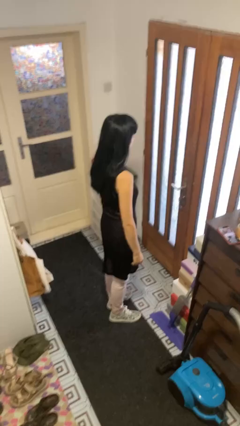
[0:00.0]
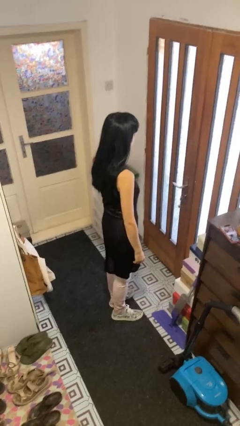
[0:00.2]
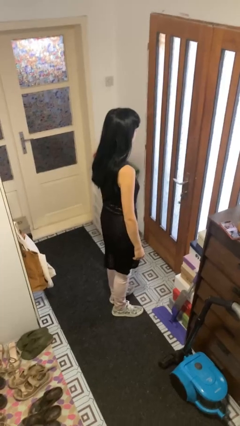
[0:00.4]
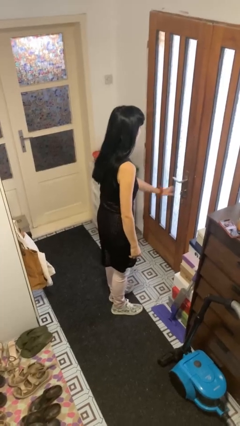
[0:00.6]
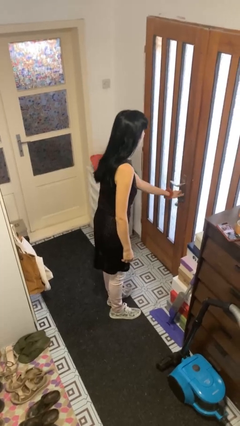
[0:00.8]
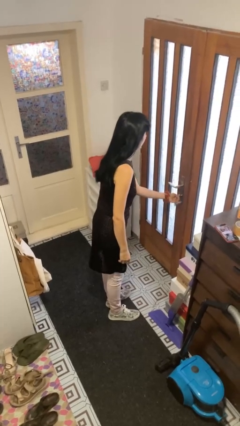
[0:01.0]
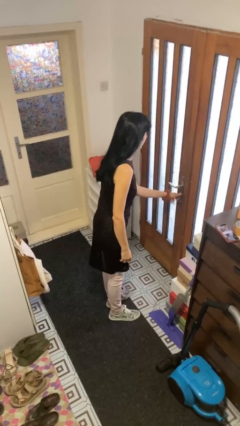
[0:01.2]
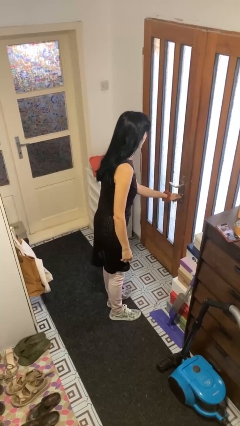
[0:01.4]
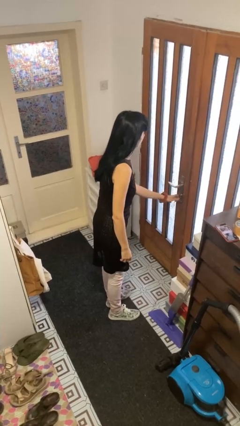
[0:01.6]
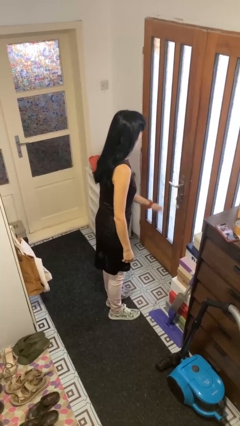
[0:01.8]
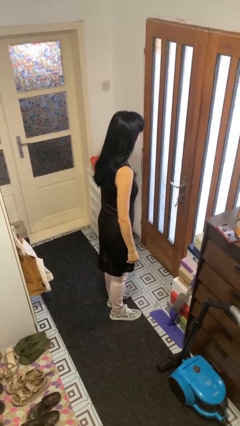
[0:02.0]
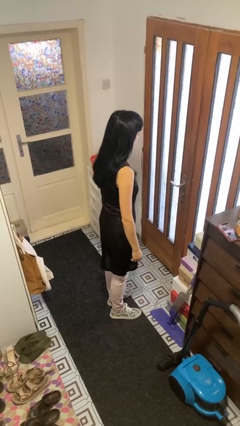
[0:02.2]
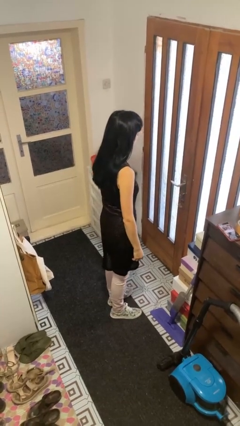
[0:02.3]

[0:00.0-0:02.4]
person unlocks door with keys

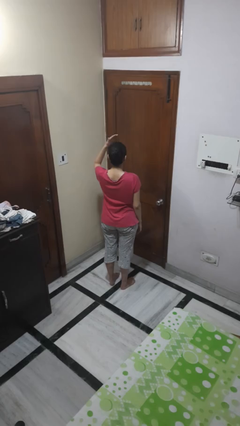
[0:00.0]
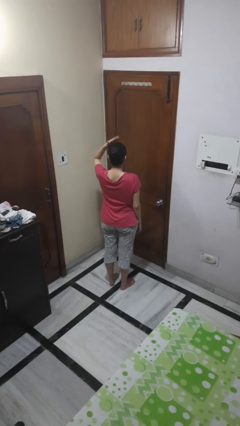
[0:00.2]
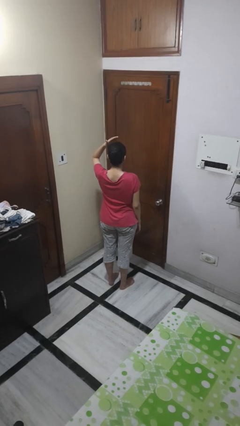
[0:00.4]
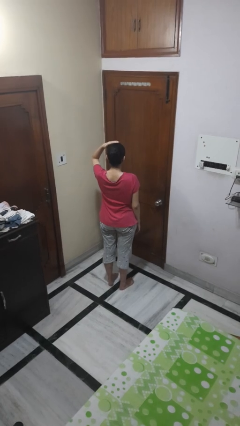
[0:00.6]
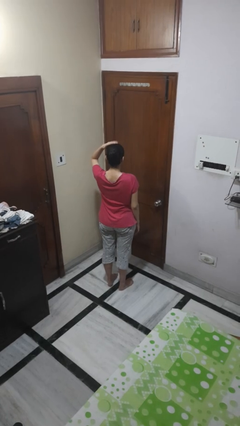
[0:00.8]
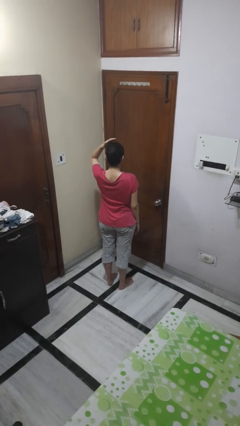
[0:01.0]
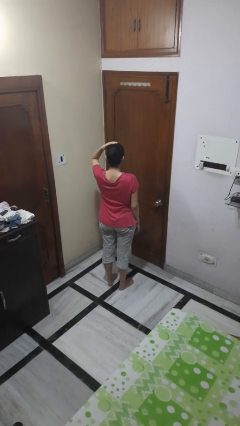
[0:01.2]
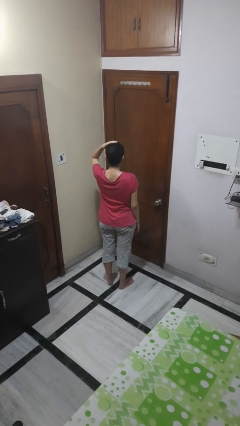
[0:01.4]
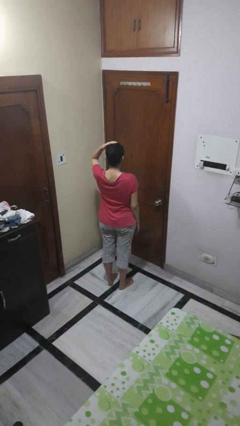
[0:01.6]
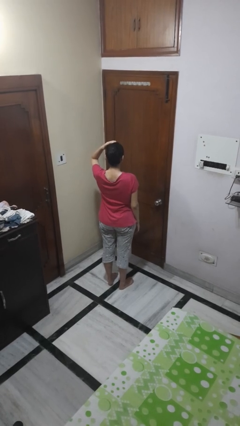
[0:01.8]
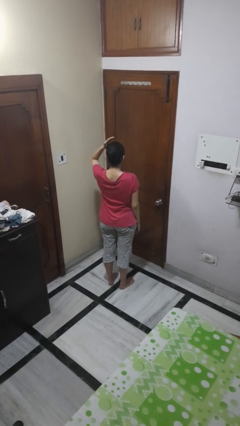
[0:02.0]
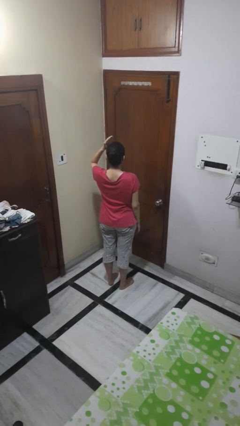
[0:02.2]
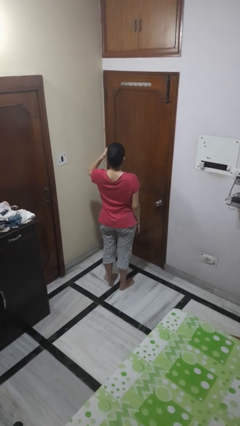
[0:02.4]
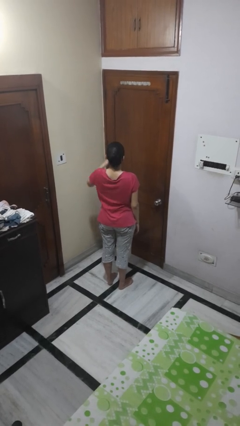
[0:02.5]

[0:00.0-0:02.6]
person pats head

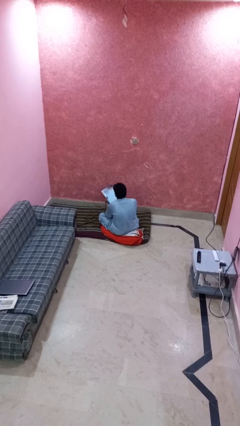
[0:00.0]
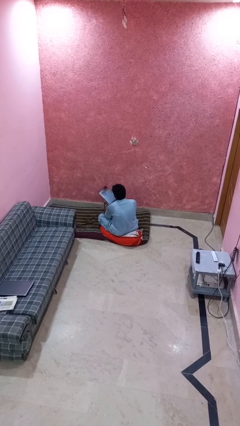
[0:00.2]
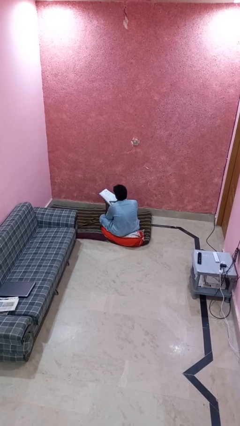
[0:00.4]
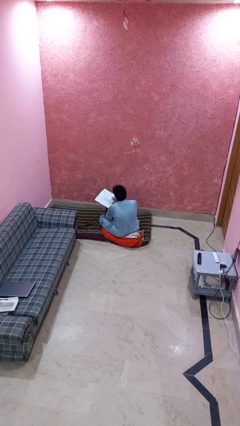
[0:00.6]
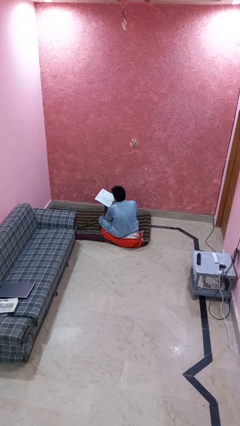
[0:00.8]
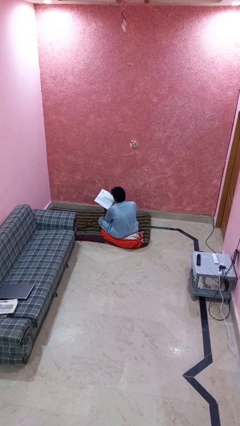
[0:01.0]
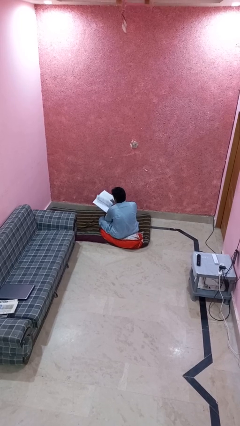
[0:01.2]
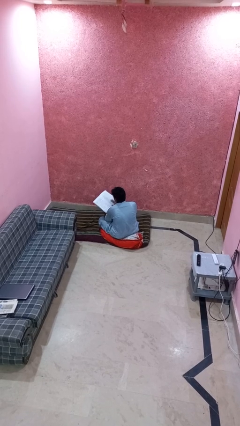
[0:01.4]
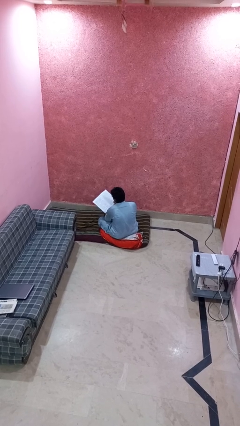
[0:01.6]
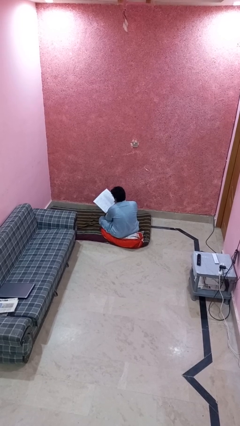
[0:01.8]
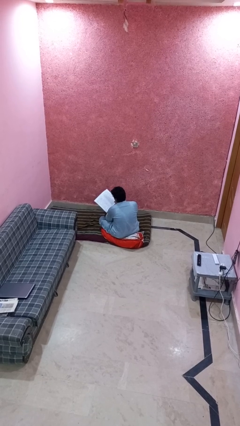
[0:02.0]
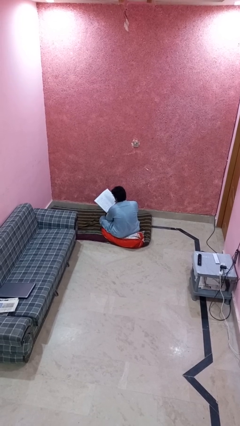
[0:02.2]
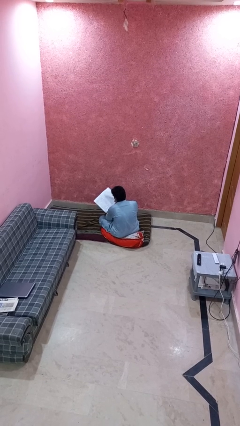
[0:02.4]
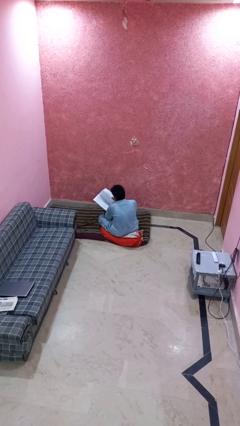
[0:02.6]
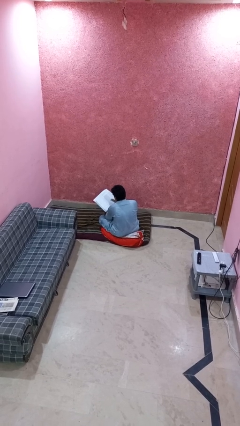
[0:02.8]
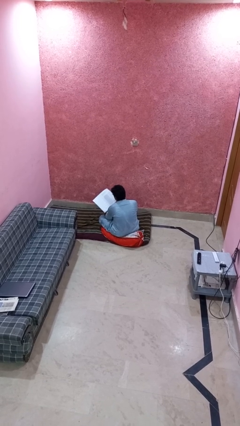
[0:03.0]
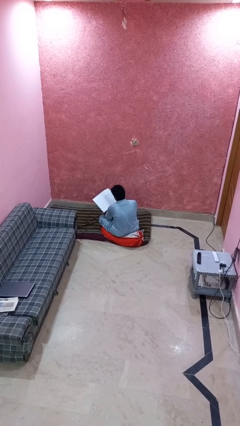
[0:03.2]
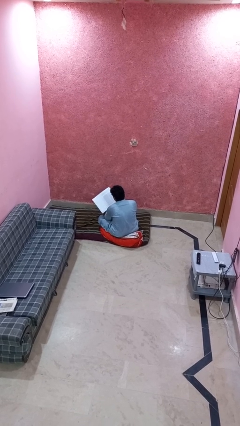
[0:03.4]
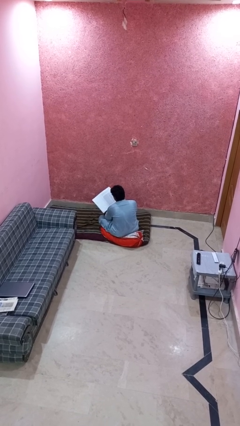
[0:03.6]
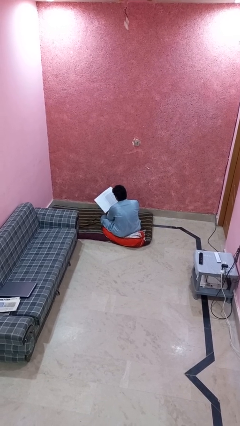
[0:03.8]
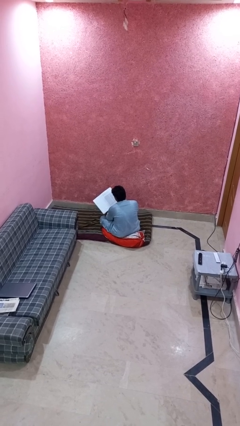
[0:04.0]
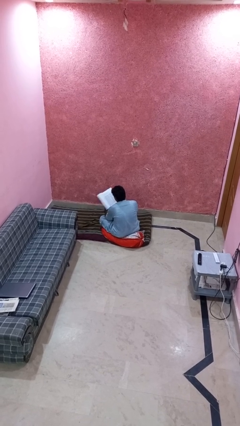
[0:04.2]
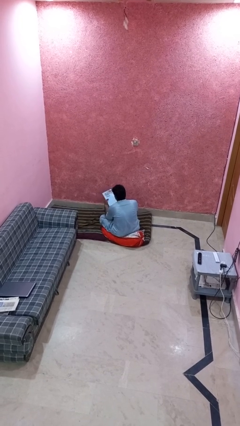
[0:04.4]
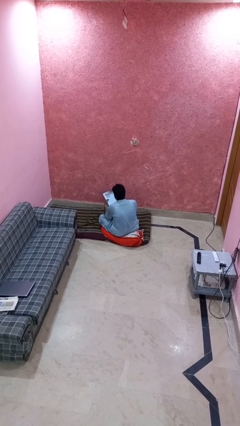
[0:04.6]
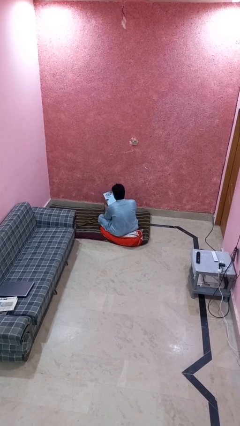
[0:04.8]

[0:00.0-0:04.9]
person reads magazine

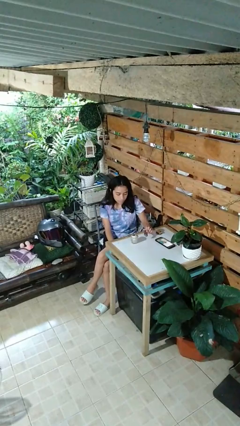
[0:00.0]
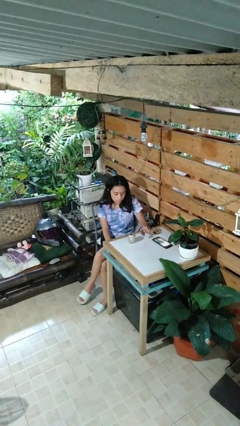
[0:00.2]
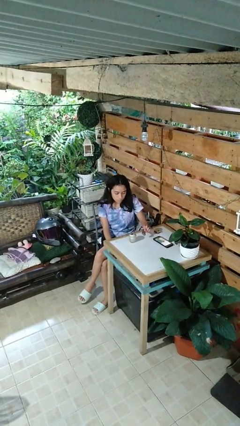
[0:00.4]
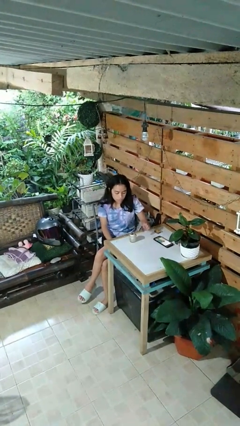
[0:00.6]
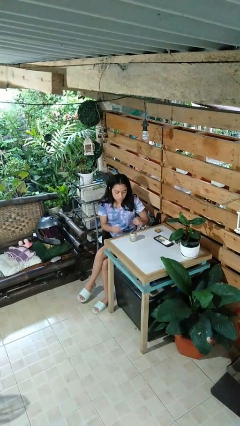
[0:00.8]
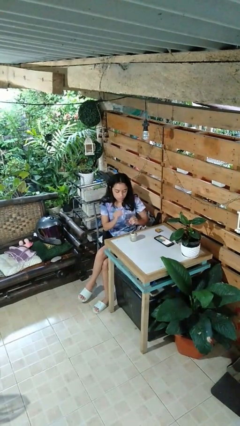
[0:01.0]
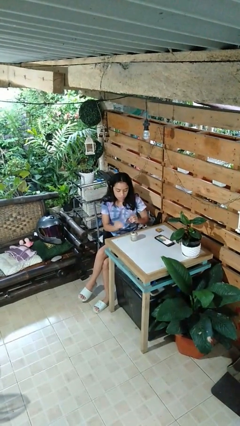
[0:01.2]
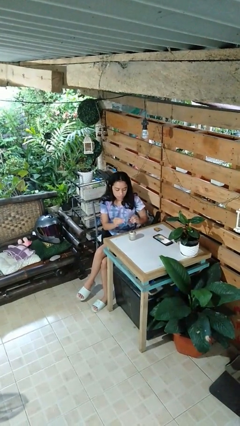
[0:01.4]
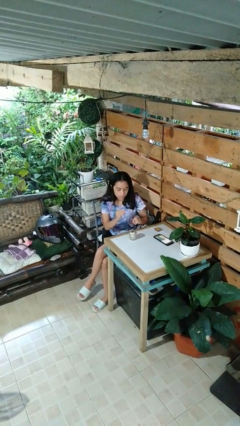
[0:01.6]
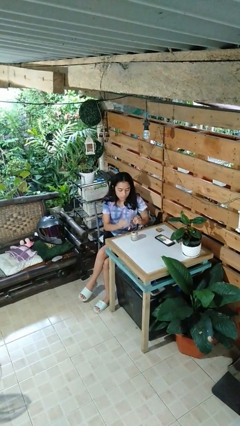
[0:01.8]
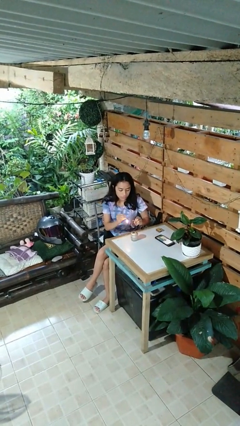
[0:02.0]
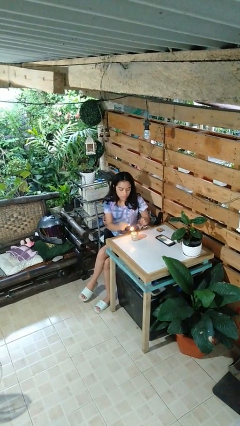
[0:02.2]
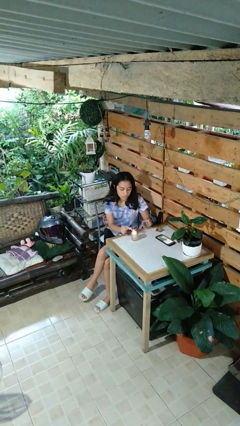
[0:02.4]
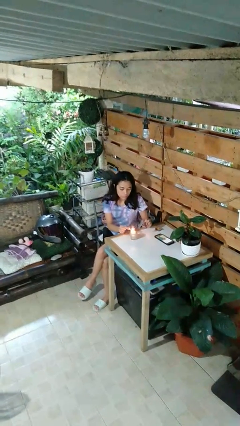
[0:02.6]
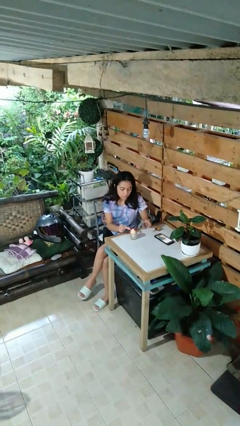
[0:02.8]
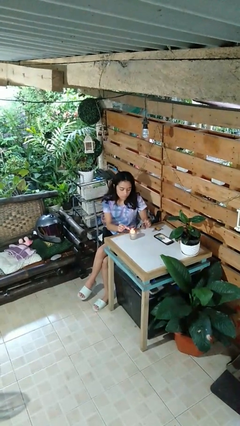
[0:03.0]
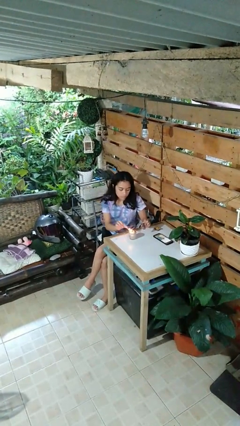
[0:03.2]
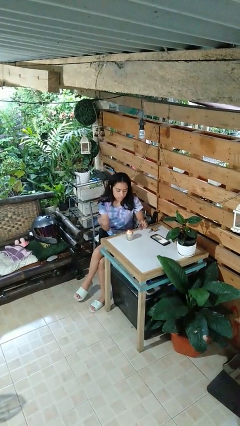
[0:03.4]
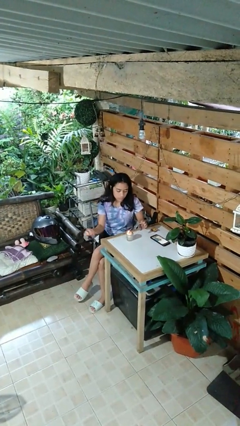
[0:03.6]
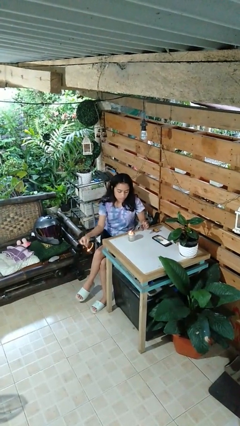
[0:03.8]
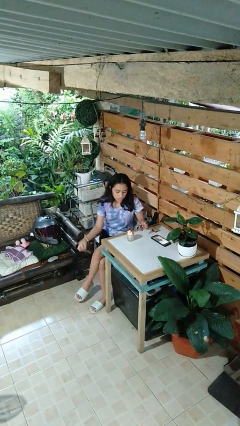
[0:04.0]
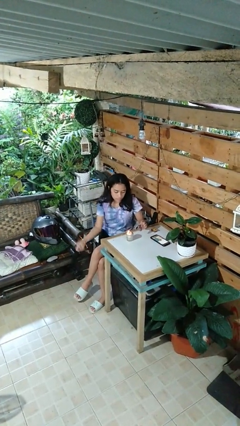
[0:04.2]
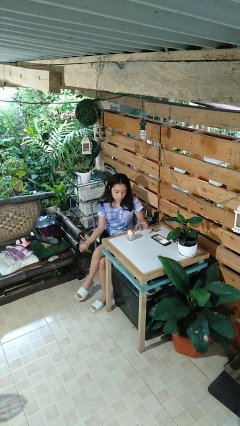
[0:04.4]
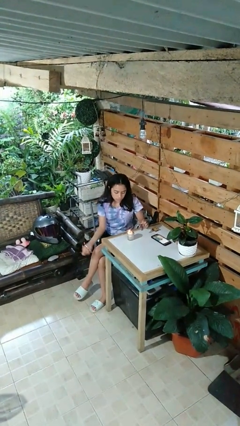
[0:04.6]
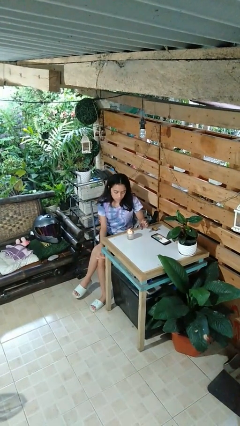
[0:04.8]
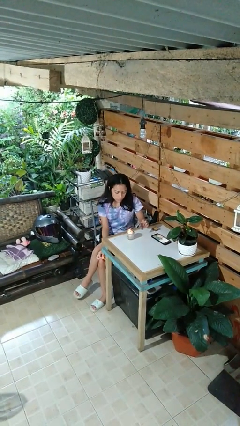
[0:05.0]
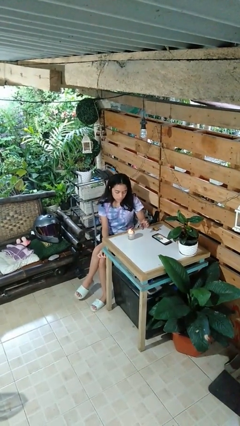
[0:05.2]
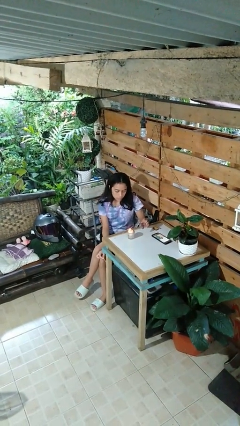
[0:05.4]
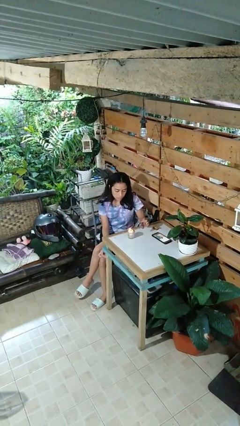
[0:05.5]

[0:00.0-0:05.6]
person lights candle

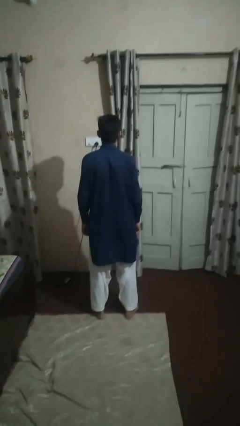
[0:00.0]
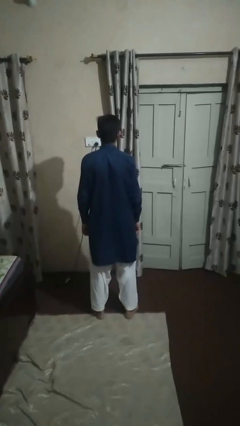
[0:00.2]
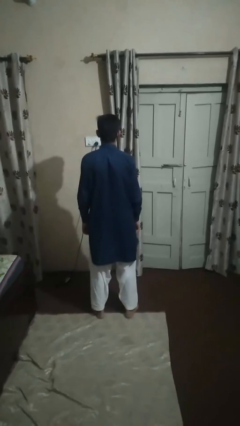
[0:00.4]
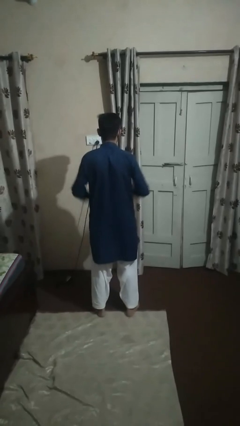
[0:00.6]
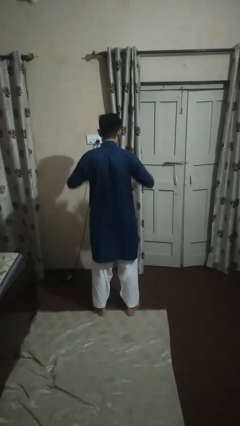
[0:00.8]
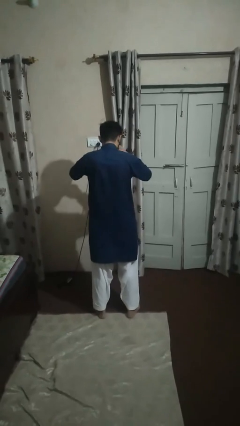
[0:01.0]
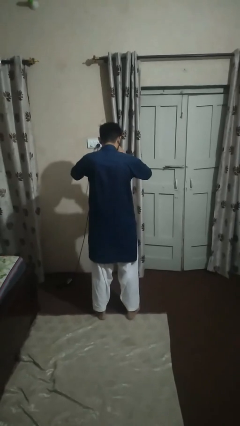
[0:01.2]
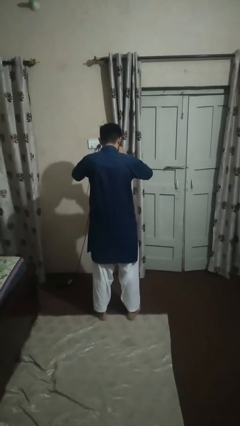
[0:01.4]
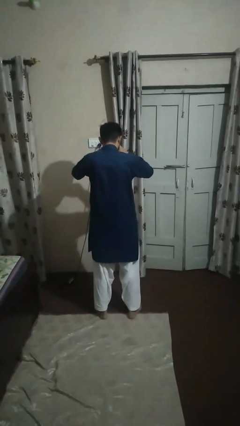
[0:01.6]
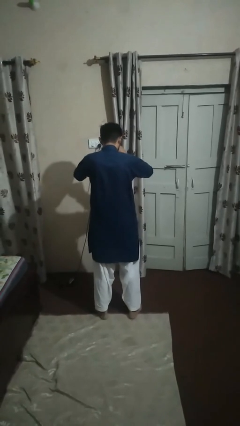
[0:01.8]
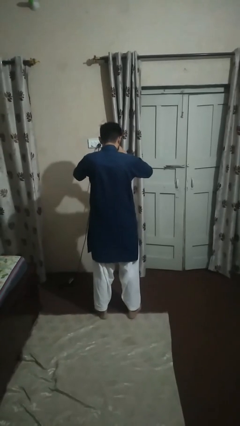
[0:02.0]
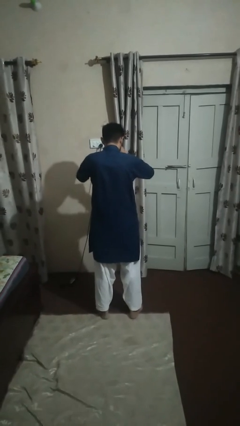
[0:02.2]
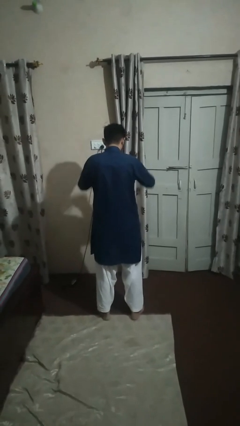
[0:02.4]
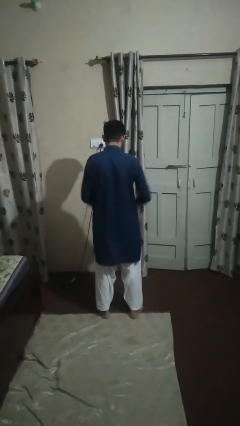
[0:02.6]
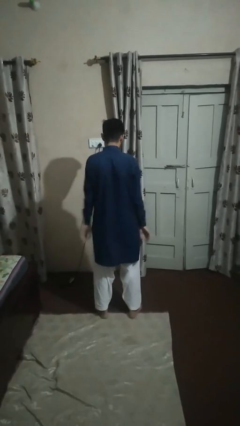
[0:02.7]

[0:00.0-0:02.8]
person rubs eyes
